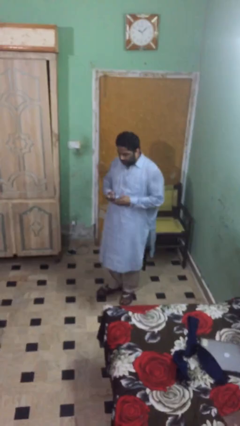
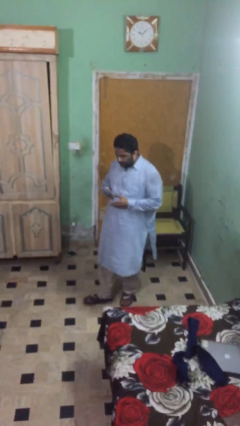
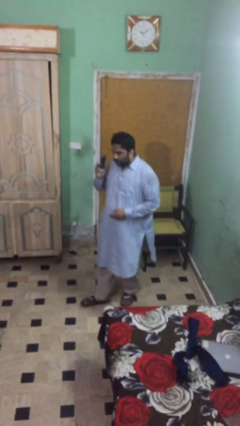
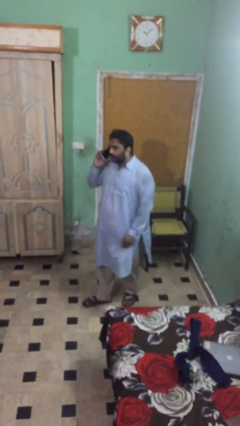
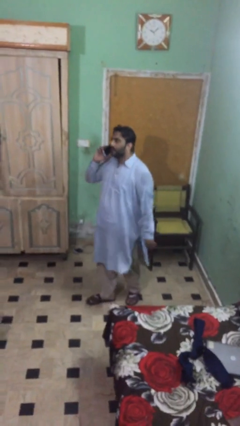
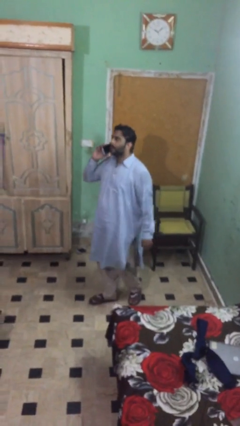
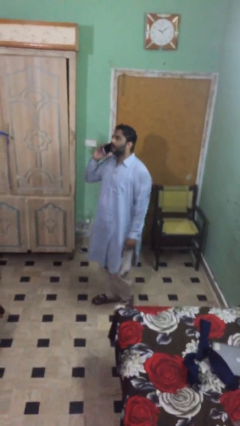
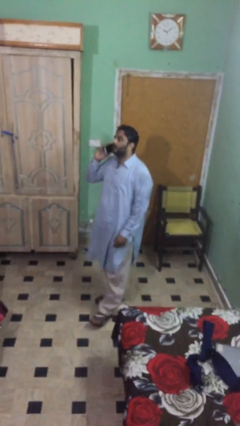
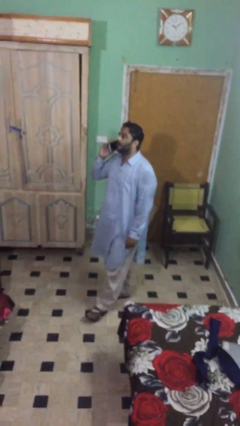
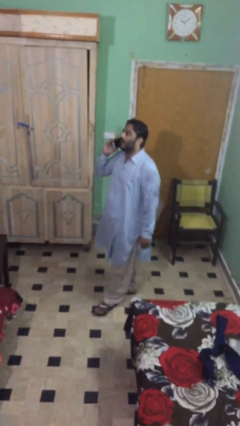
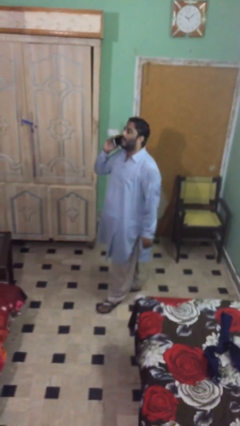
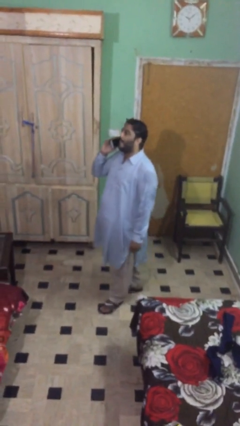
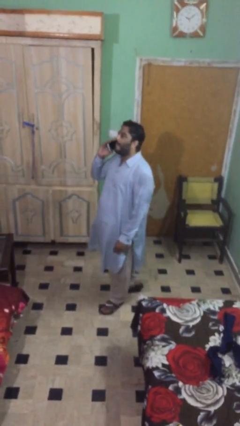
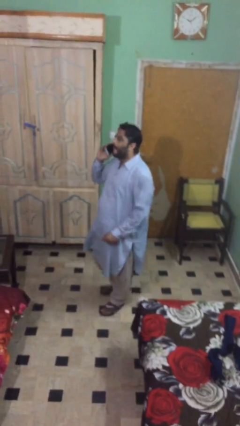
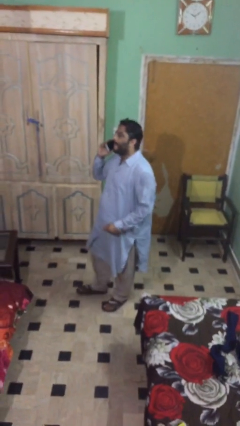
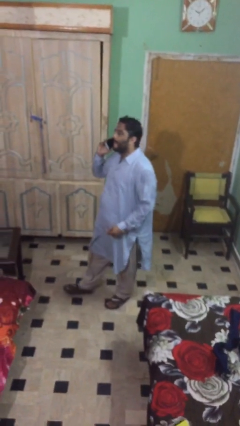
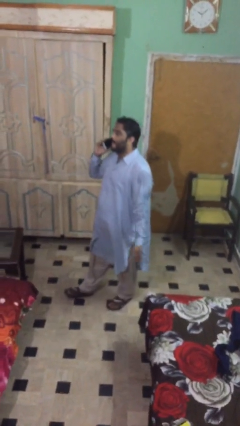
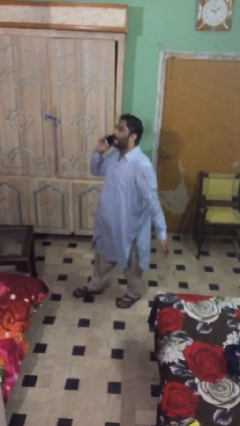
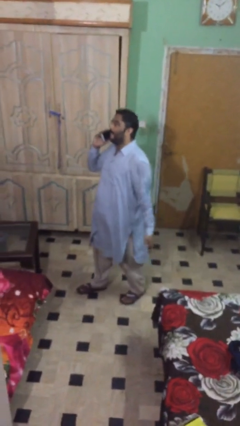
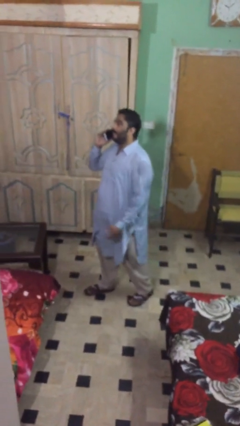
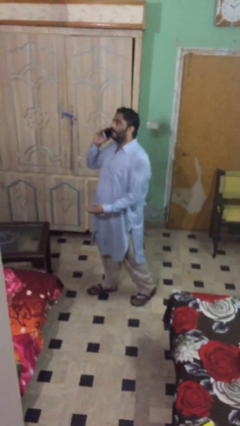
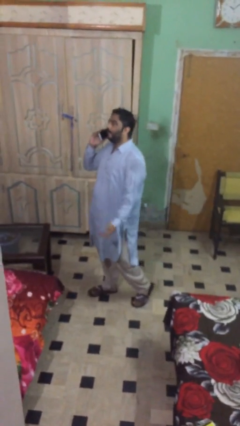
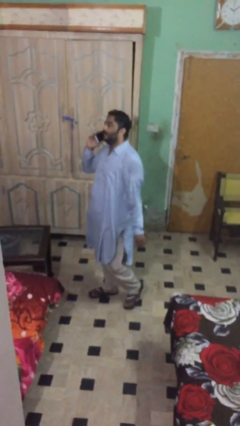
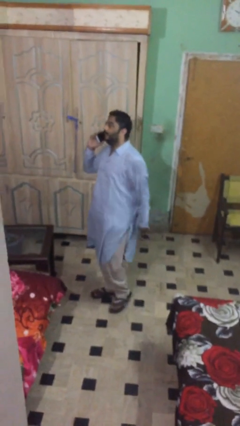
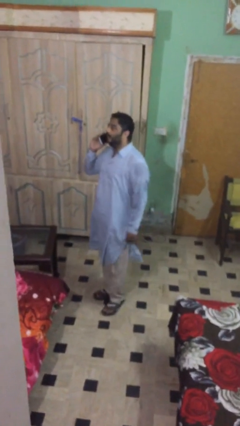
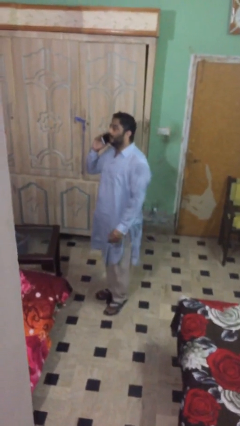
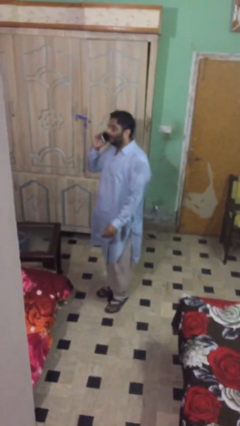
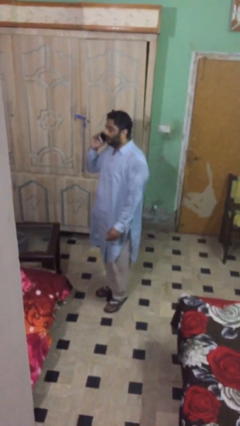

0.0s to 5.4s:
person talks on phone

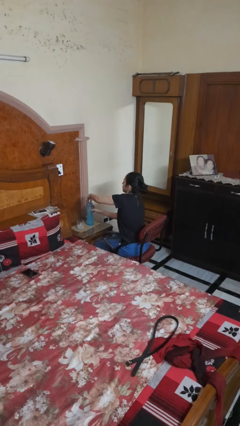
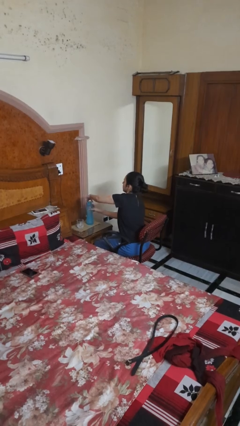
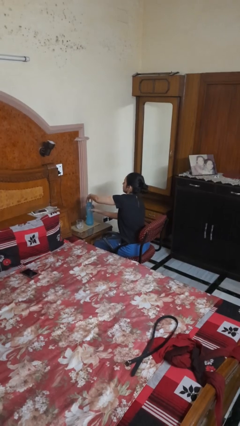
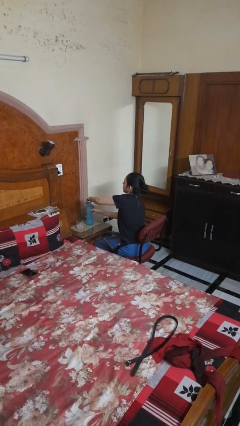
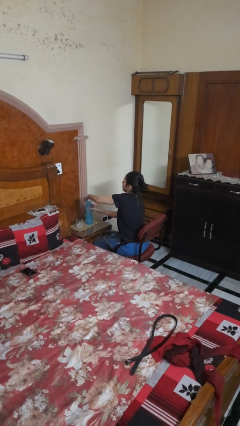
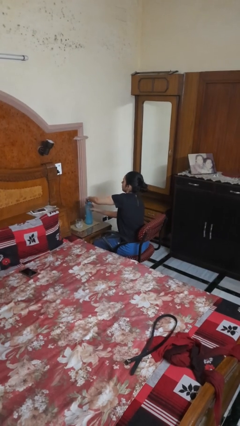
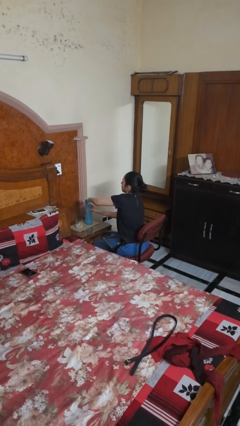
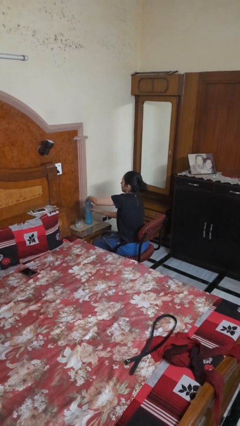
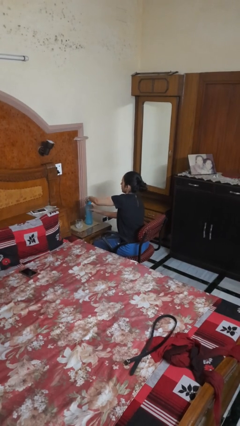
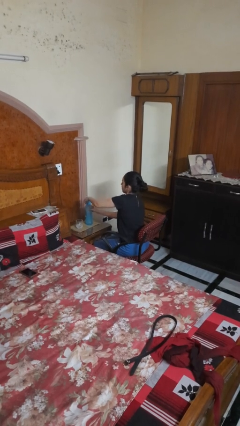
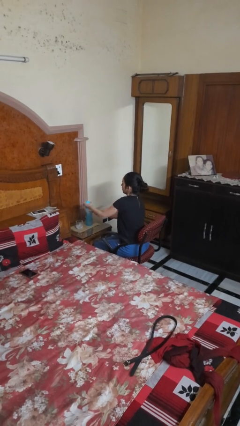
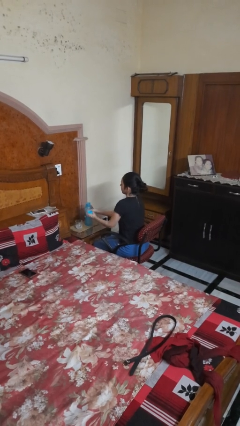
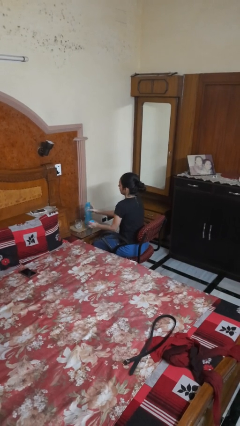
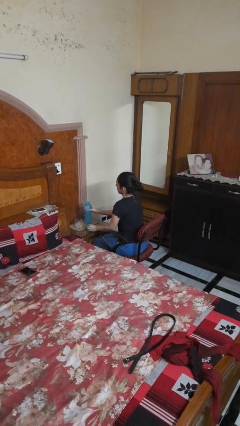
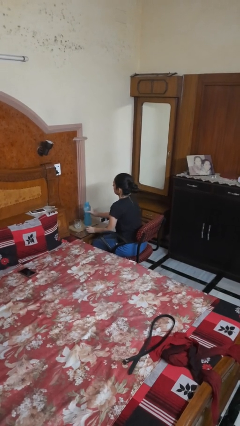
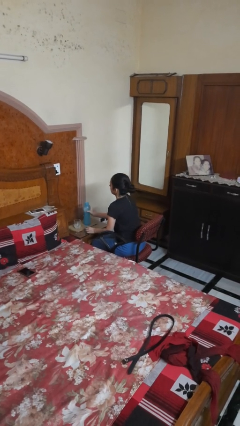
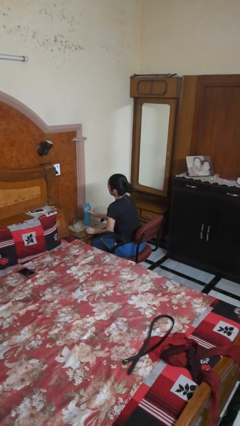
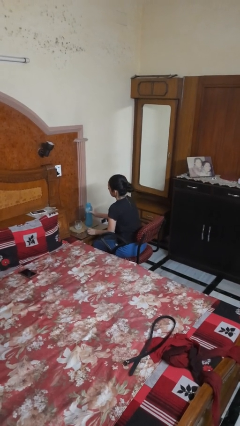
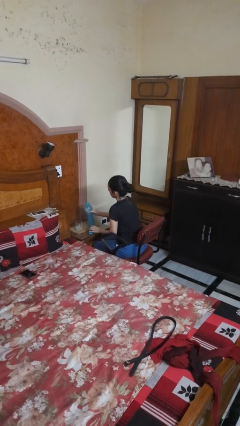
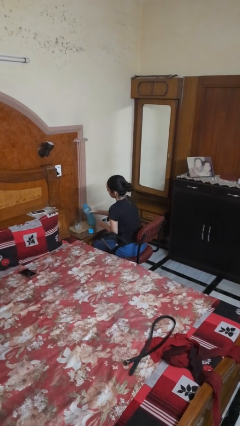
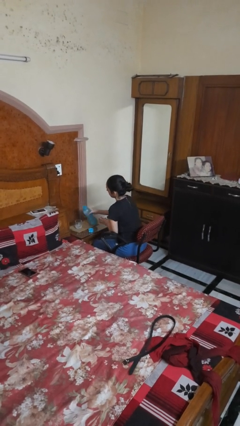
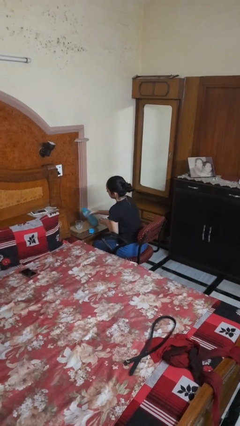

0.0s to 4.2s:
person unscrews lid from bottle

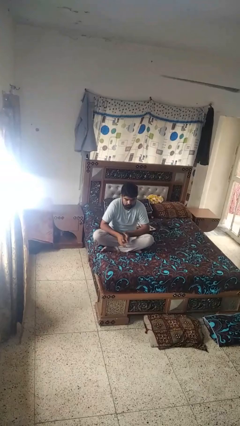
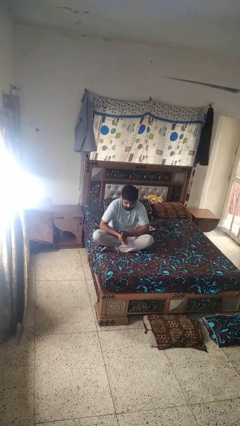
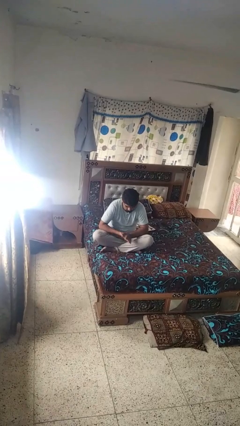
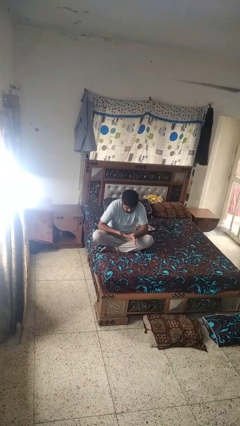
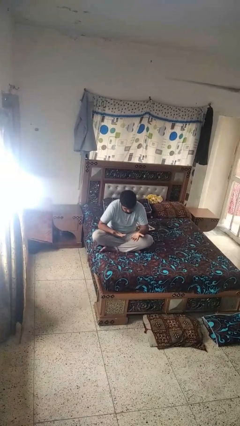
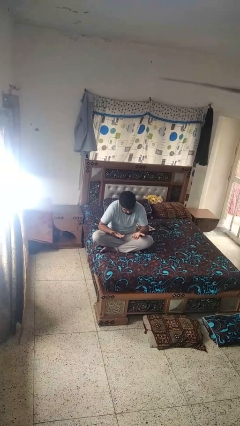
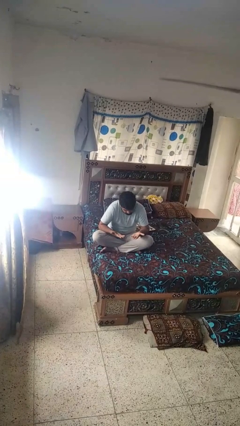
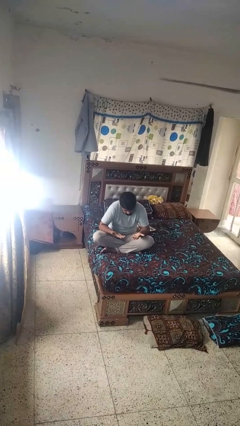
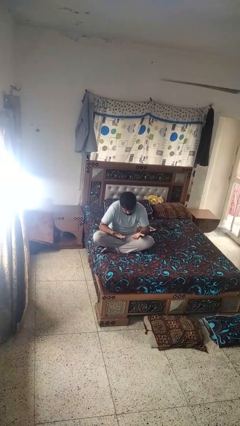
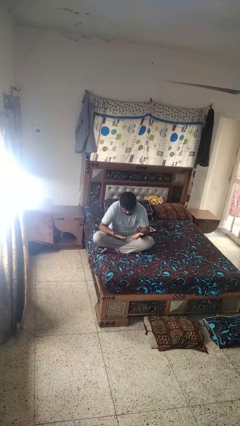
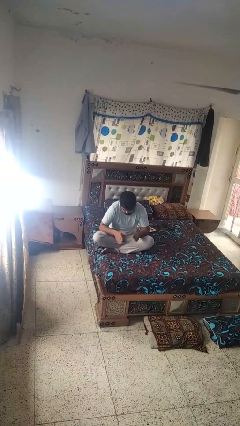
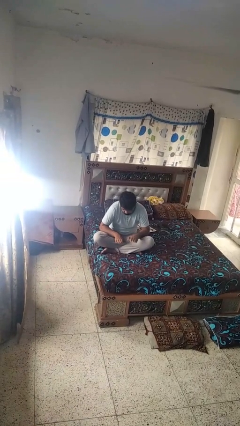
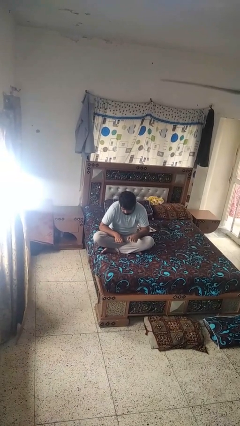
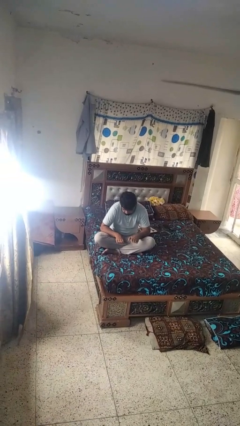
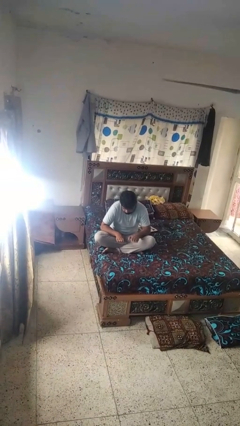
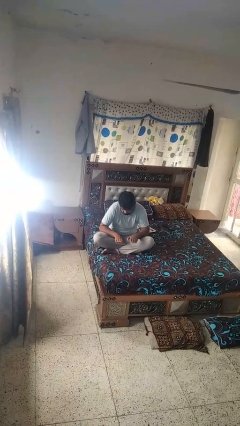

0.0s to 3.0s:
person looks at hands in lap

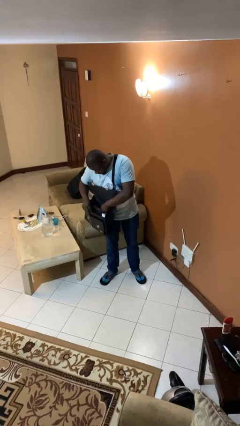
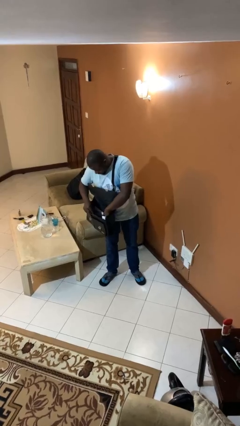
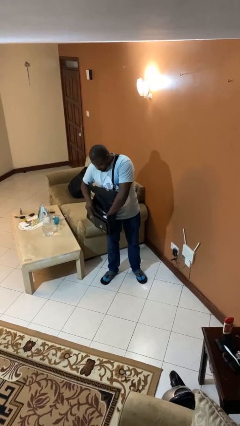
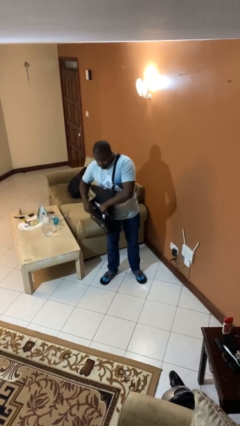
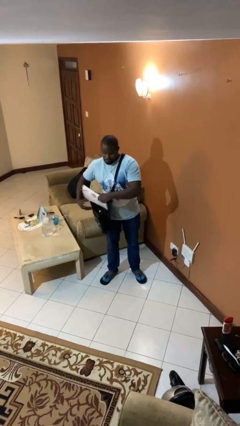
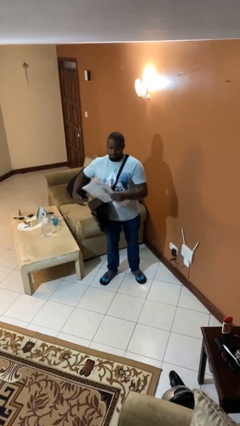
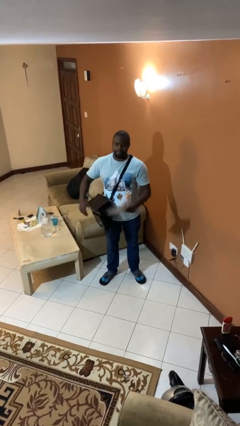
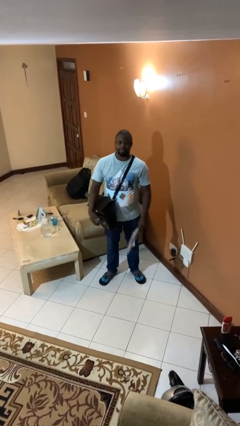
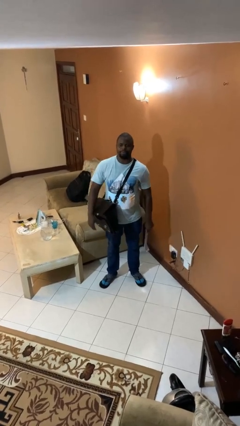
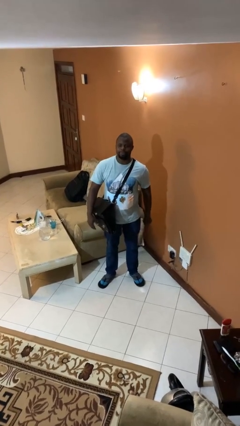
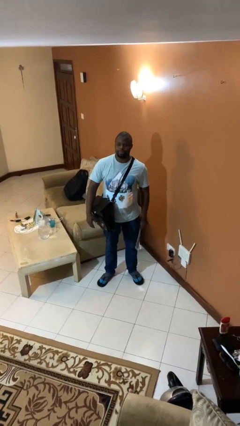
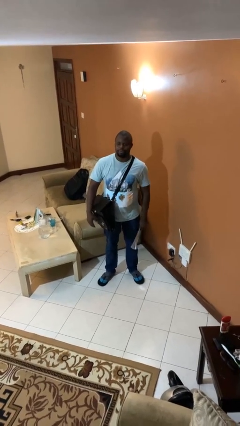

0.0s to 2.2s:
person takes object from purse

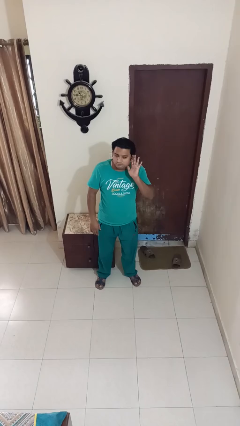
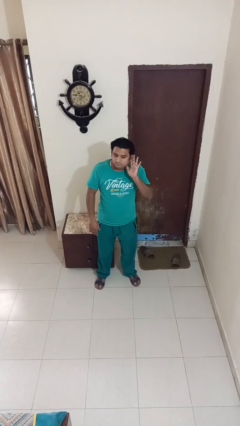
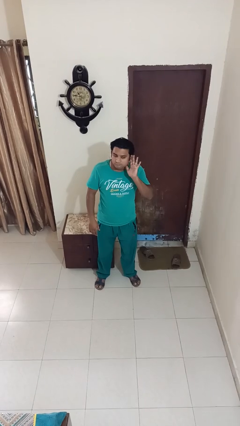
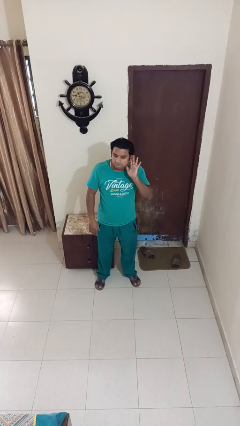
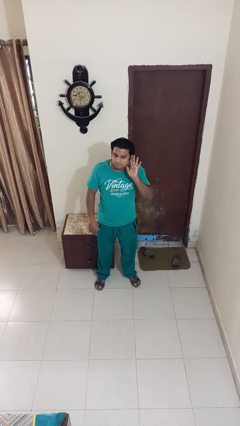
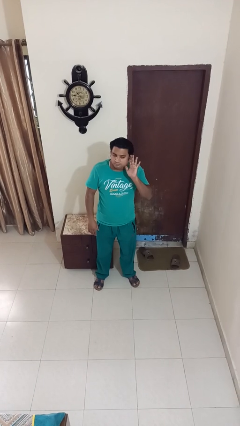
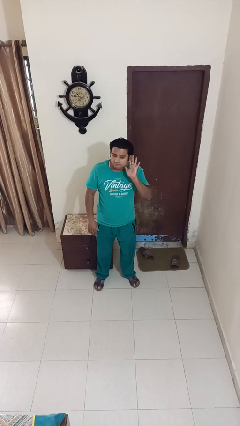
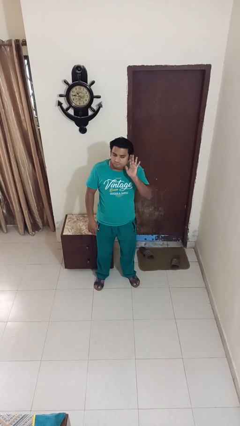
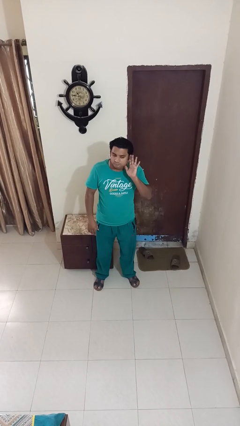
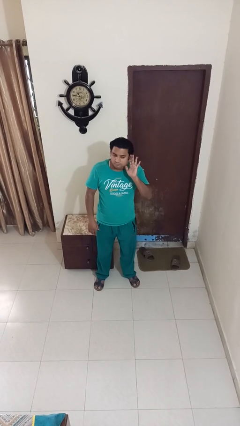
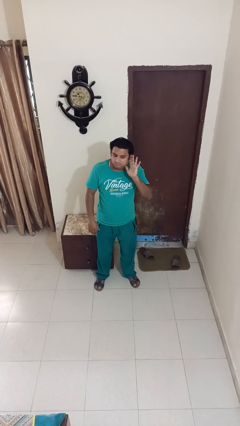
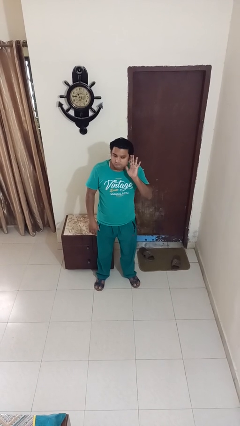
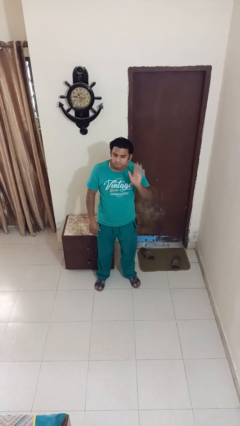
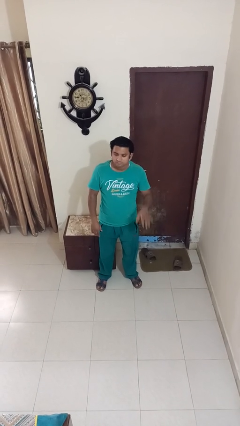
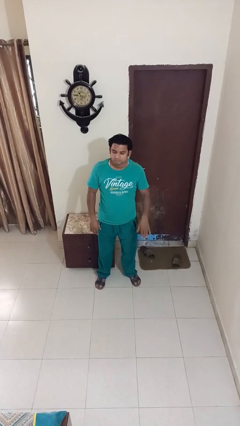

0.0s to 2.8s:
person gestures listen closely

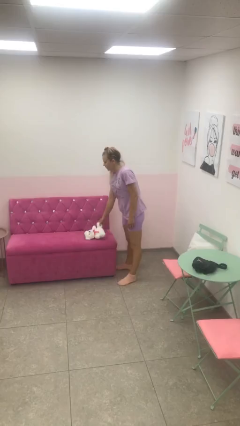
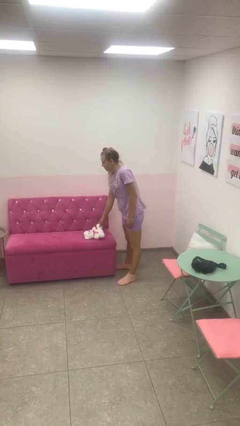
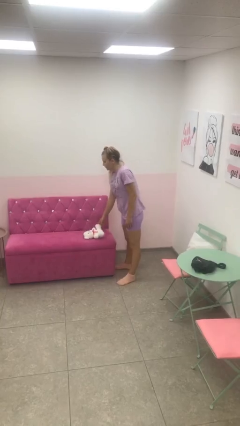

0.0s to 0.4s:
person puts down object on couch
